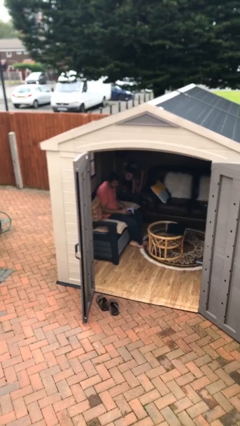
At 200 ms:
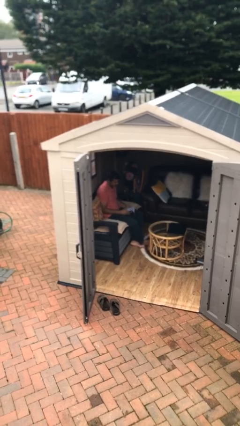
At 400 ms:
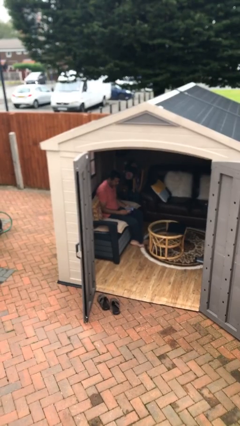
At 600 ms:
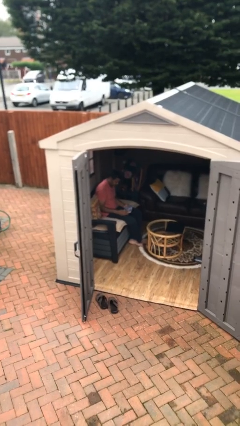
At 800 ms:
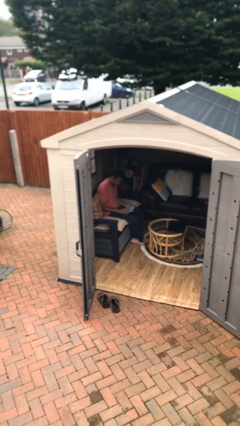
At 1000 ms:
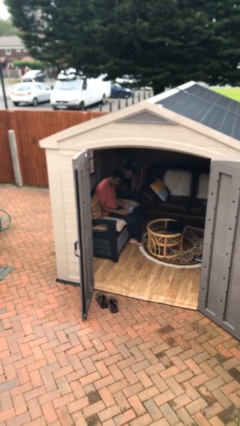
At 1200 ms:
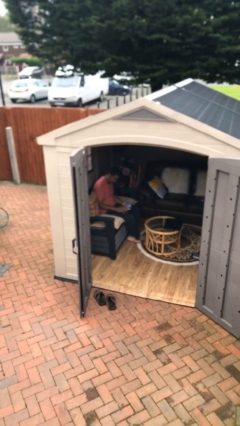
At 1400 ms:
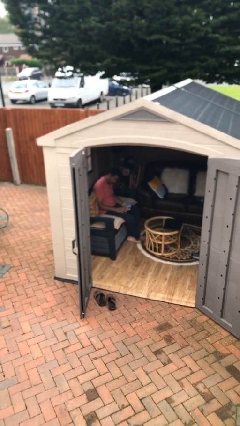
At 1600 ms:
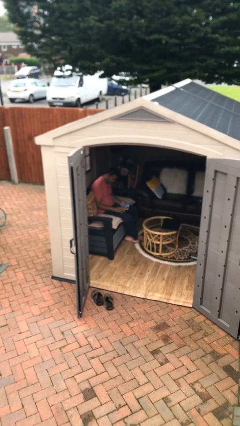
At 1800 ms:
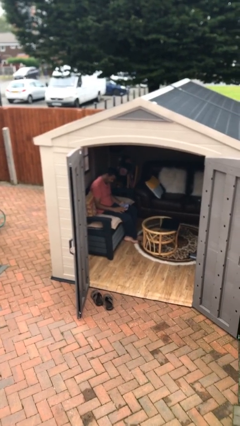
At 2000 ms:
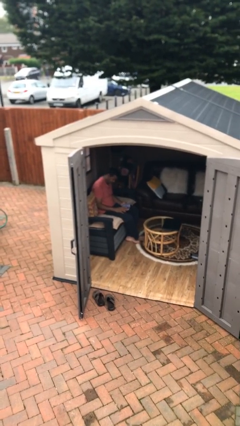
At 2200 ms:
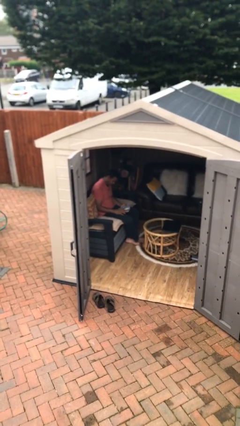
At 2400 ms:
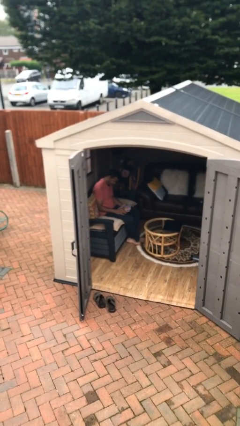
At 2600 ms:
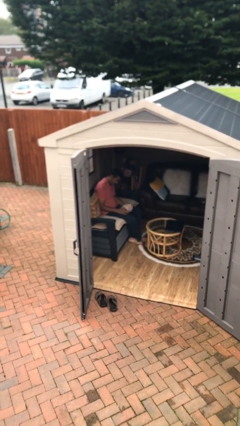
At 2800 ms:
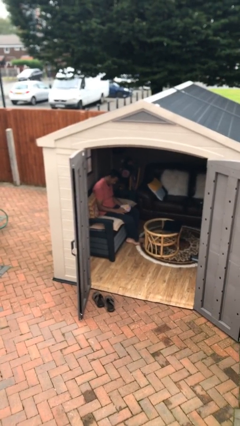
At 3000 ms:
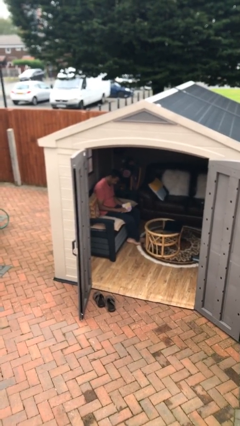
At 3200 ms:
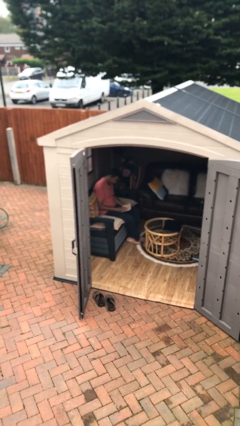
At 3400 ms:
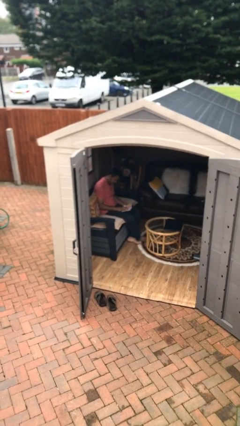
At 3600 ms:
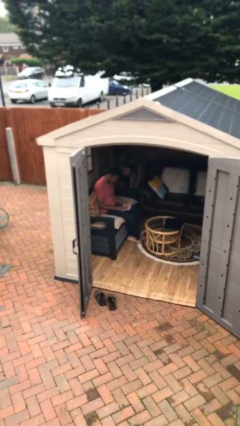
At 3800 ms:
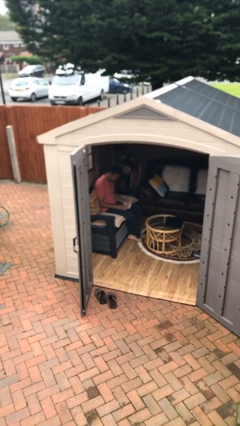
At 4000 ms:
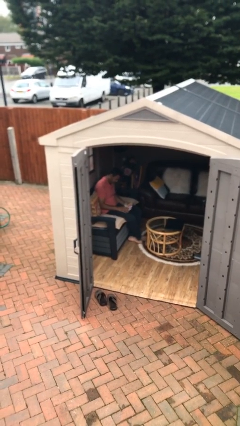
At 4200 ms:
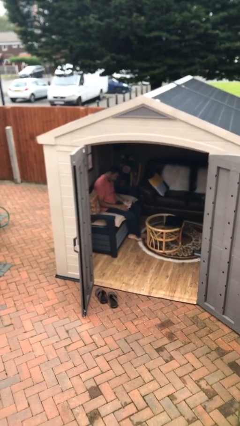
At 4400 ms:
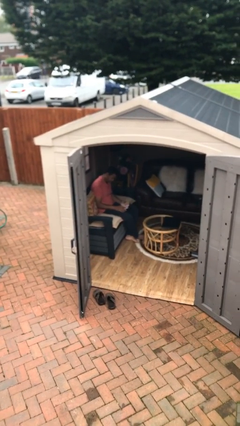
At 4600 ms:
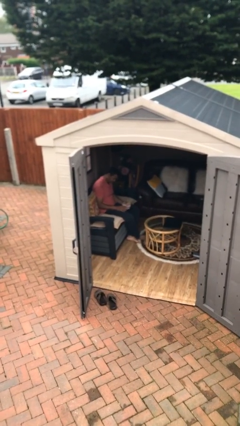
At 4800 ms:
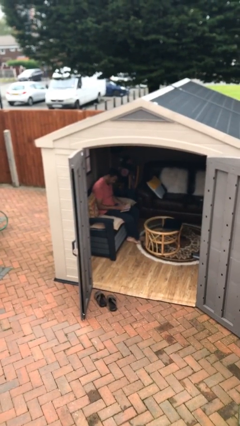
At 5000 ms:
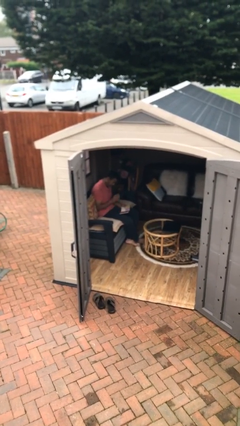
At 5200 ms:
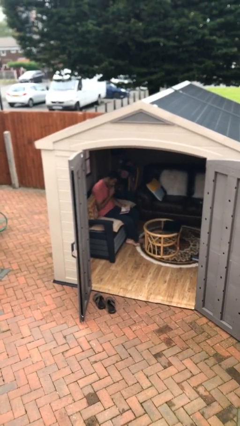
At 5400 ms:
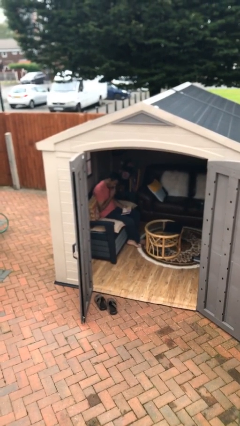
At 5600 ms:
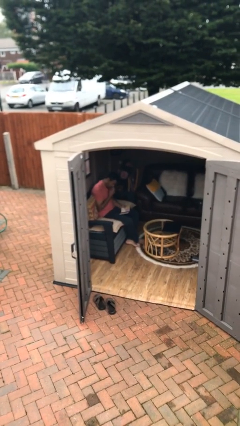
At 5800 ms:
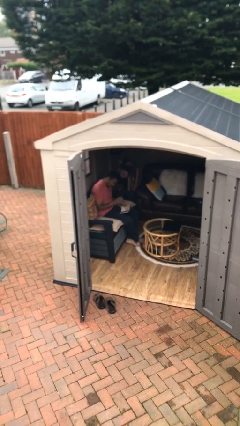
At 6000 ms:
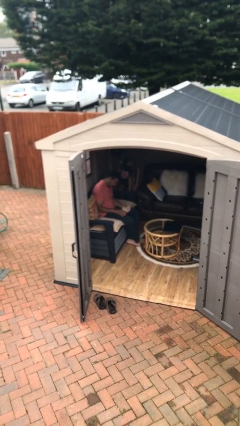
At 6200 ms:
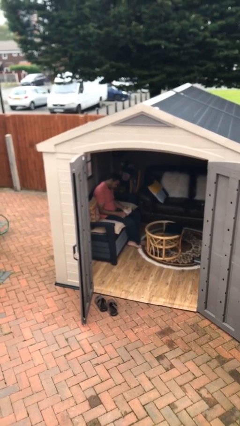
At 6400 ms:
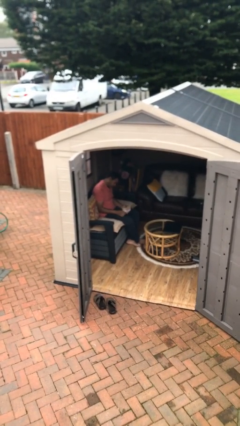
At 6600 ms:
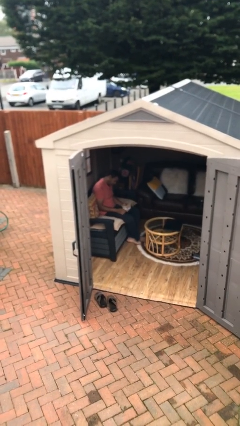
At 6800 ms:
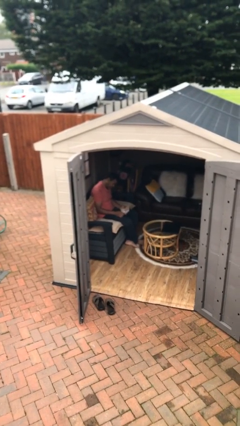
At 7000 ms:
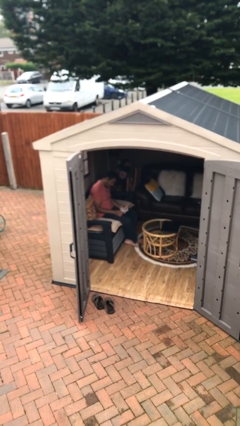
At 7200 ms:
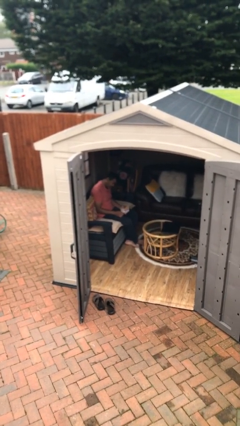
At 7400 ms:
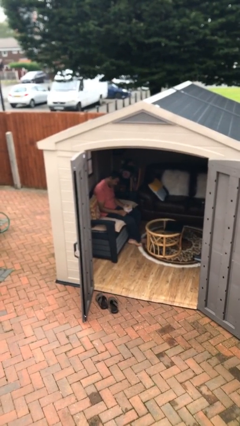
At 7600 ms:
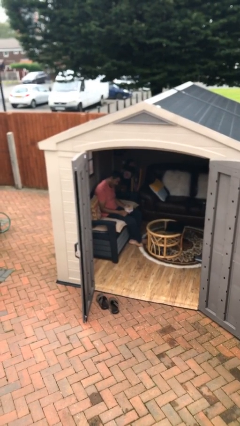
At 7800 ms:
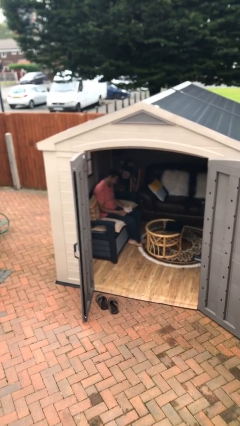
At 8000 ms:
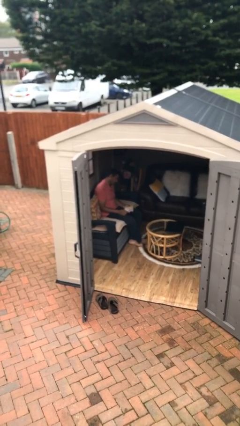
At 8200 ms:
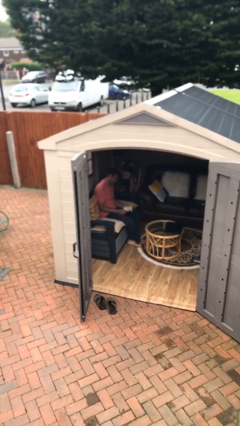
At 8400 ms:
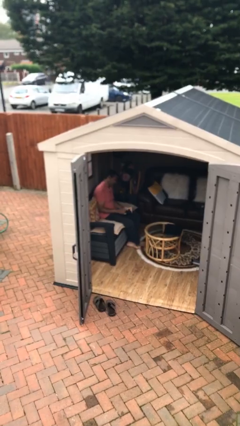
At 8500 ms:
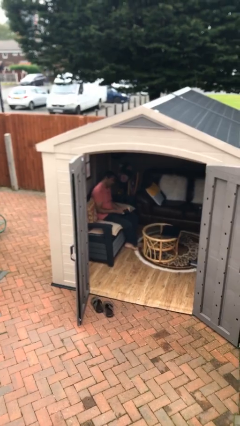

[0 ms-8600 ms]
person reads document

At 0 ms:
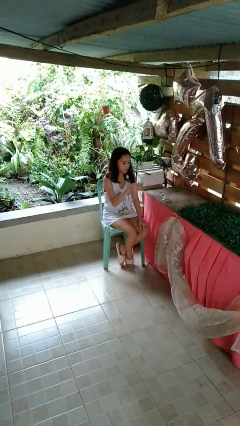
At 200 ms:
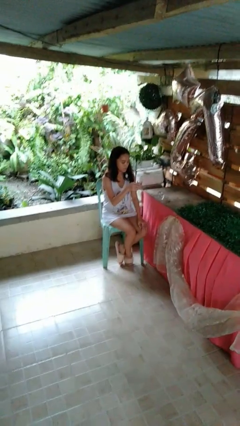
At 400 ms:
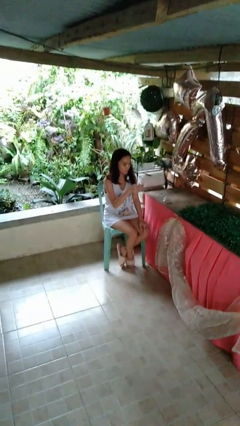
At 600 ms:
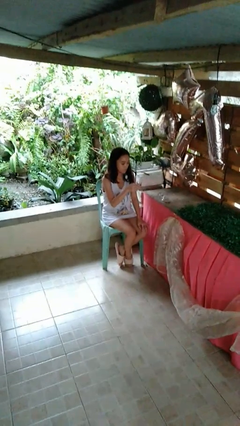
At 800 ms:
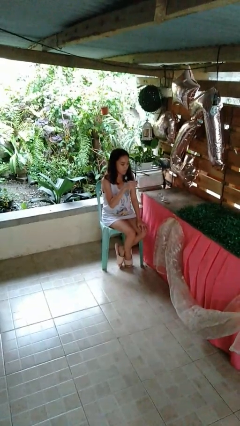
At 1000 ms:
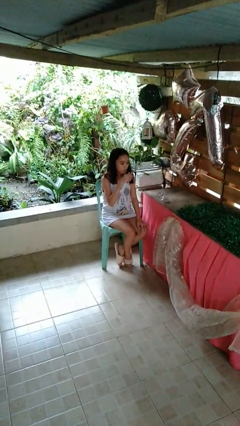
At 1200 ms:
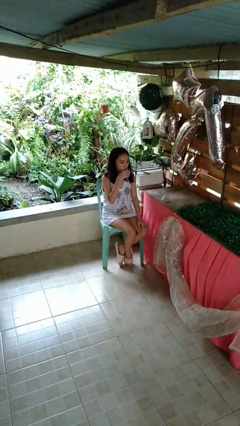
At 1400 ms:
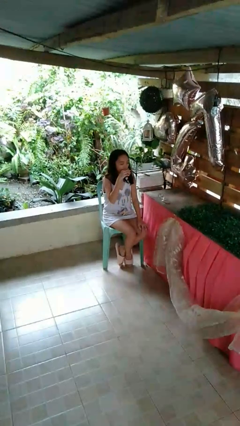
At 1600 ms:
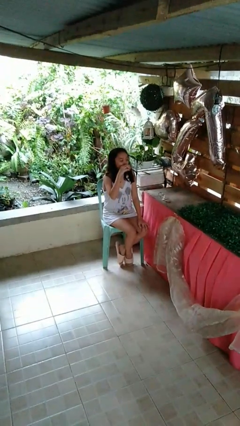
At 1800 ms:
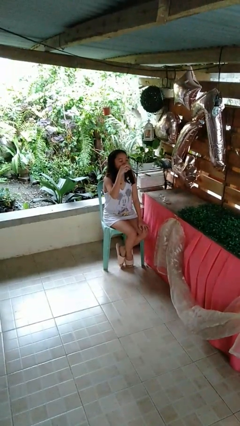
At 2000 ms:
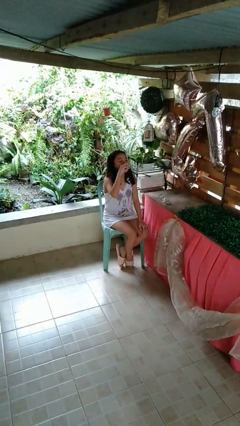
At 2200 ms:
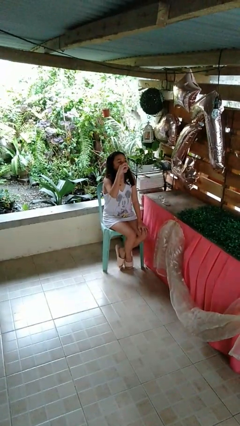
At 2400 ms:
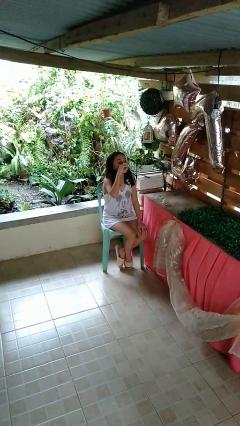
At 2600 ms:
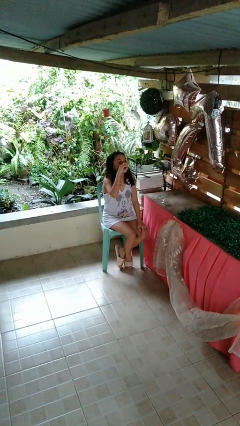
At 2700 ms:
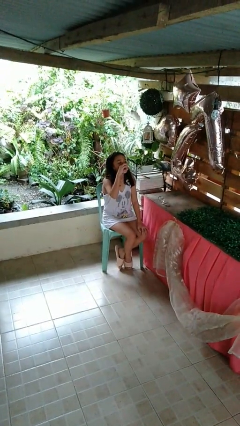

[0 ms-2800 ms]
person drinks from shotglass

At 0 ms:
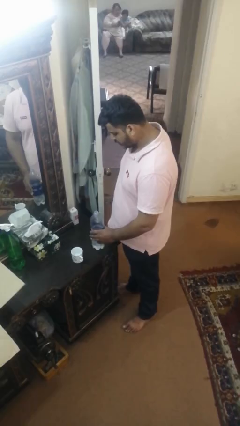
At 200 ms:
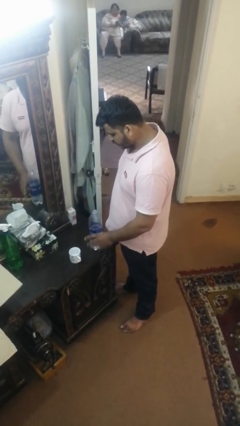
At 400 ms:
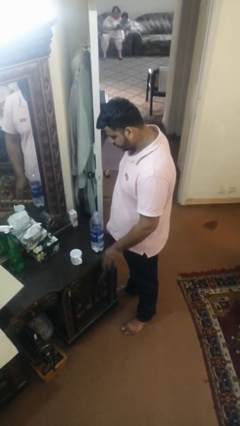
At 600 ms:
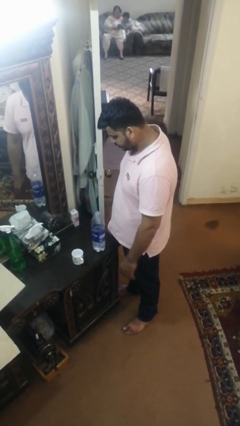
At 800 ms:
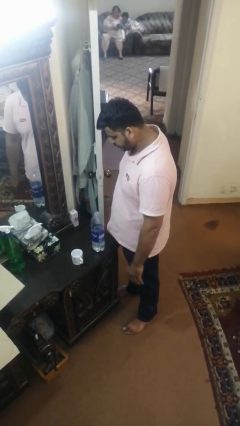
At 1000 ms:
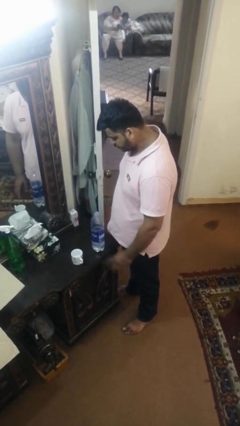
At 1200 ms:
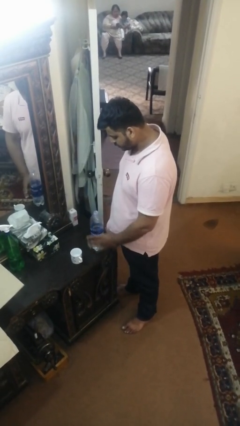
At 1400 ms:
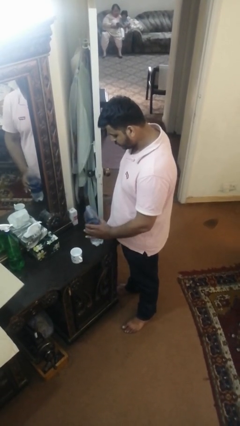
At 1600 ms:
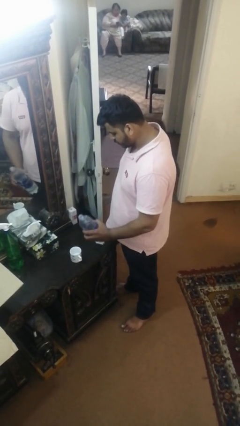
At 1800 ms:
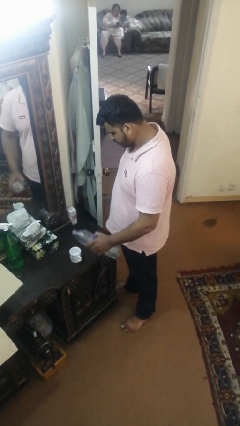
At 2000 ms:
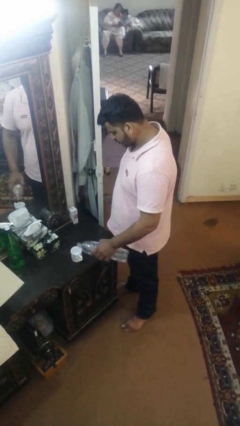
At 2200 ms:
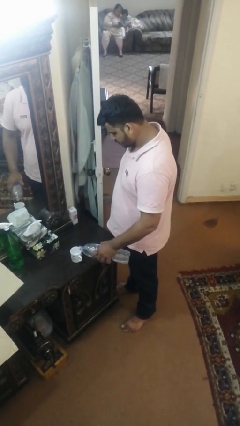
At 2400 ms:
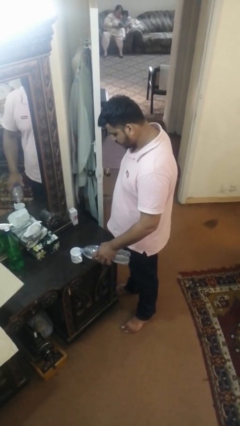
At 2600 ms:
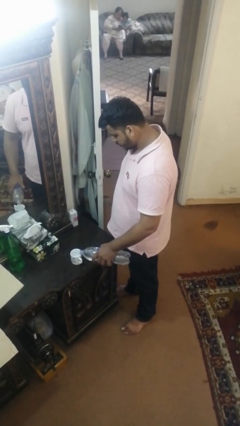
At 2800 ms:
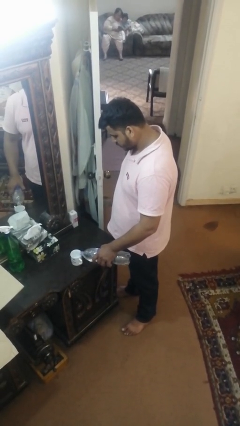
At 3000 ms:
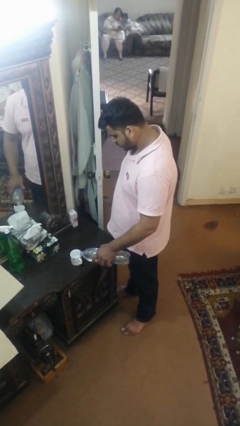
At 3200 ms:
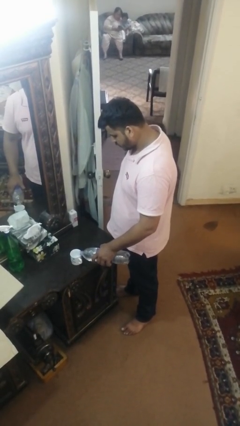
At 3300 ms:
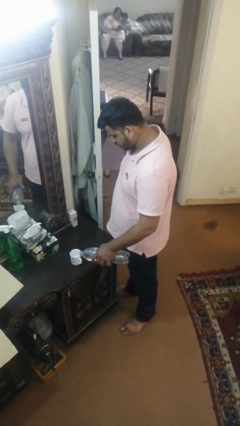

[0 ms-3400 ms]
person pours liquid into cup

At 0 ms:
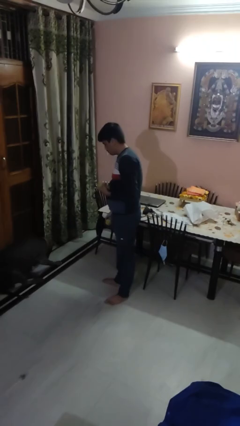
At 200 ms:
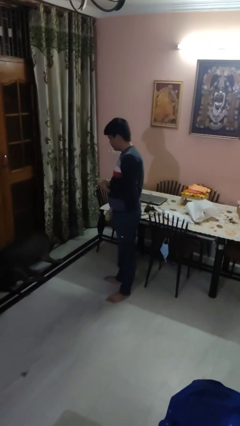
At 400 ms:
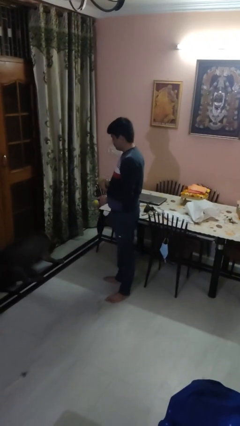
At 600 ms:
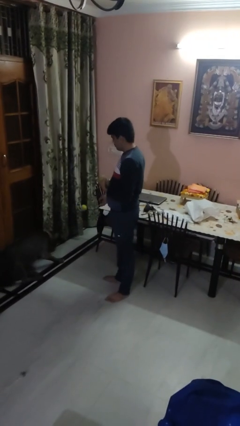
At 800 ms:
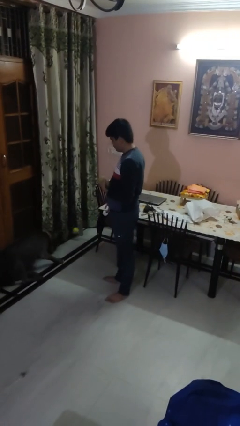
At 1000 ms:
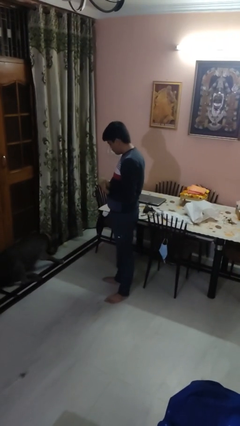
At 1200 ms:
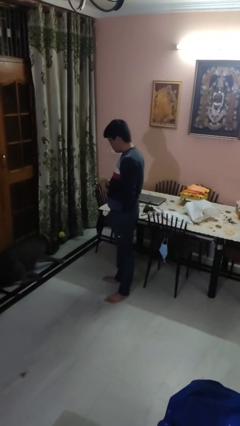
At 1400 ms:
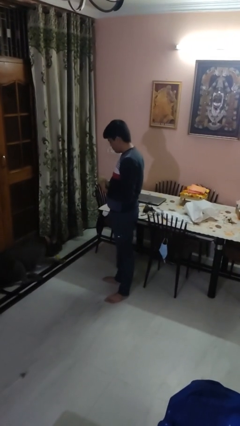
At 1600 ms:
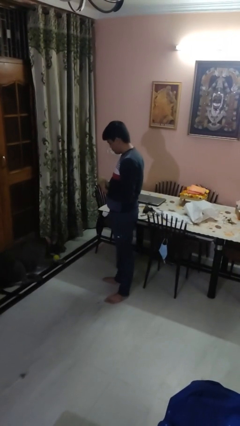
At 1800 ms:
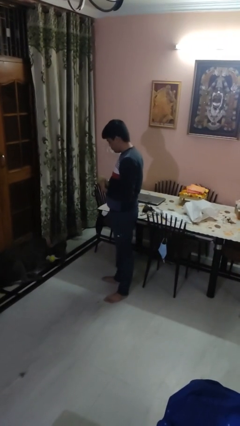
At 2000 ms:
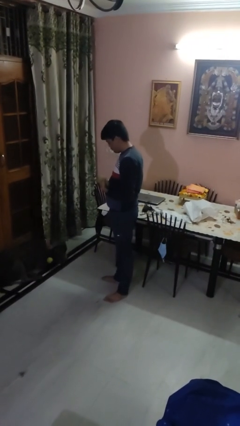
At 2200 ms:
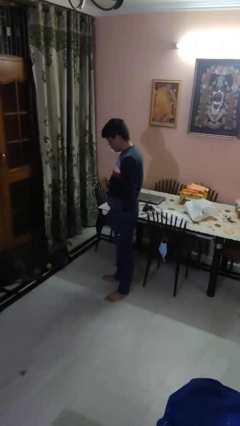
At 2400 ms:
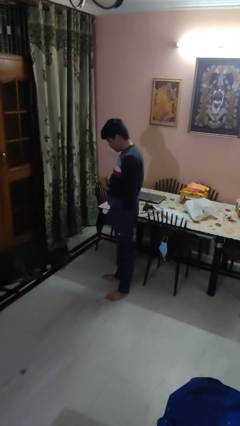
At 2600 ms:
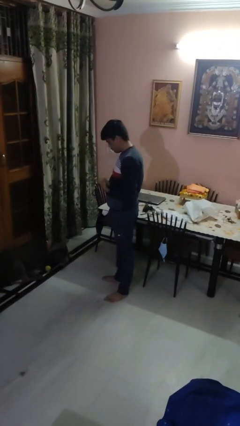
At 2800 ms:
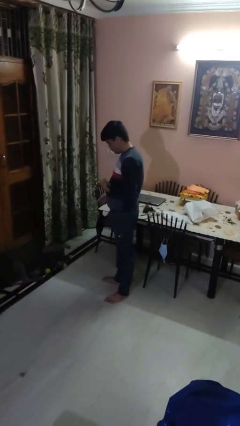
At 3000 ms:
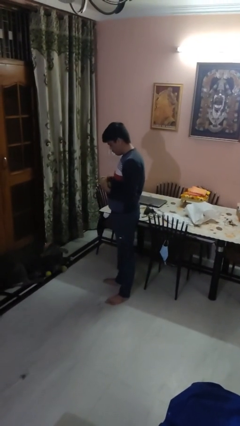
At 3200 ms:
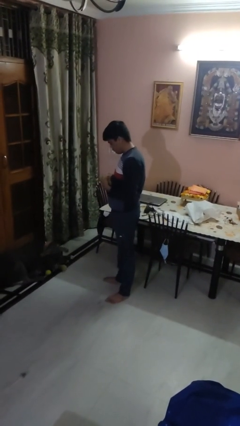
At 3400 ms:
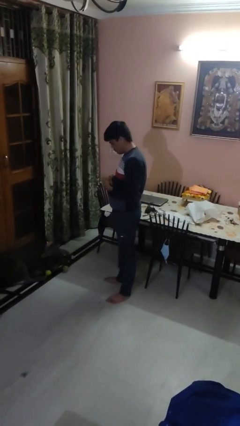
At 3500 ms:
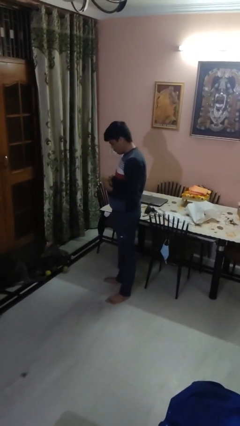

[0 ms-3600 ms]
person throws object to dog
